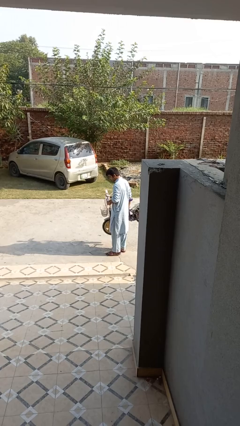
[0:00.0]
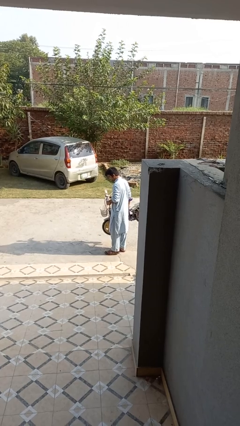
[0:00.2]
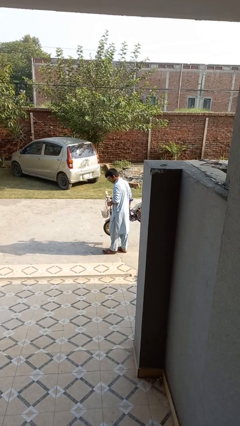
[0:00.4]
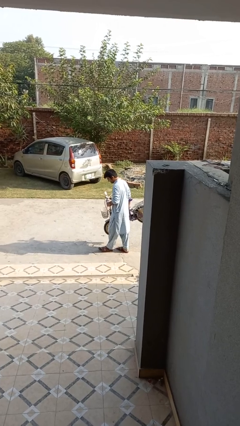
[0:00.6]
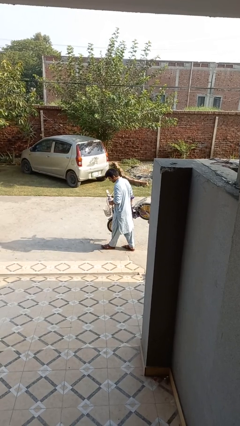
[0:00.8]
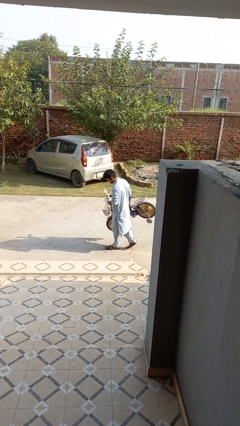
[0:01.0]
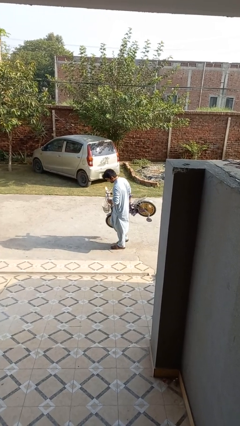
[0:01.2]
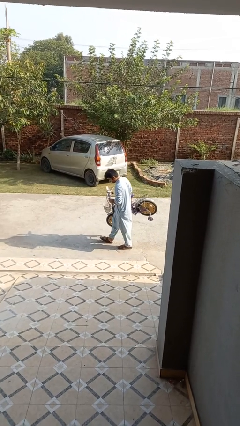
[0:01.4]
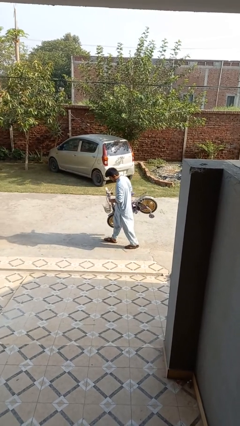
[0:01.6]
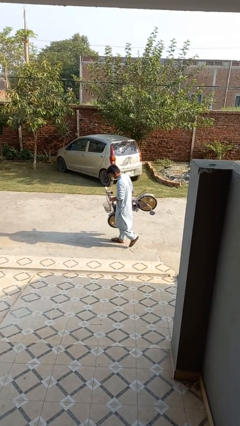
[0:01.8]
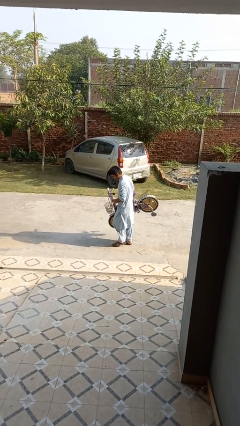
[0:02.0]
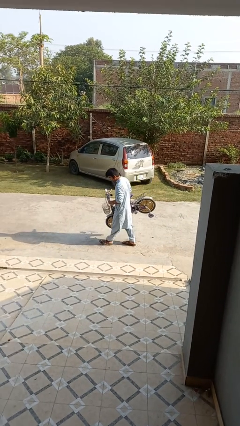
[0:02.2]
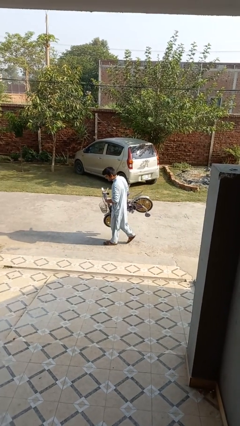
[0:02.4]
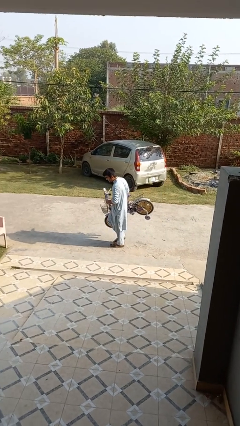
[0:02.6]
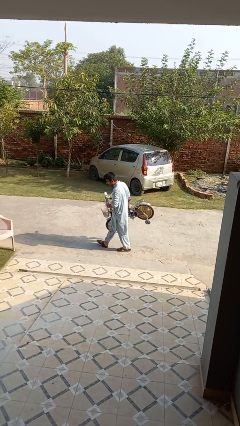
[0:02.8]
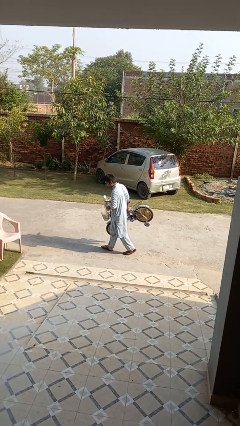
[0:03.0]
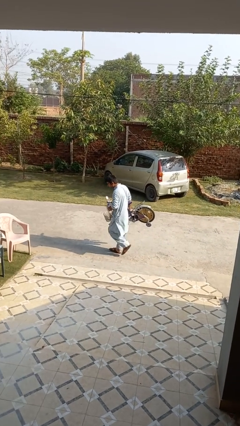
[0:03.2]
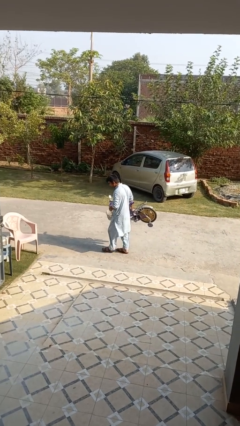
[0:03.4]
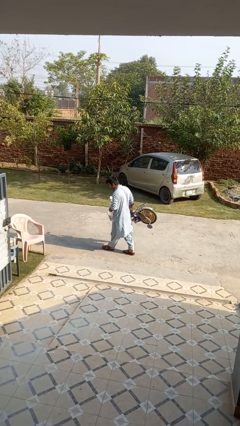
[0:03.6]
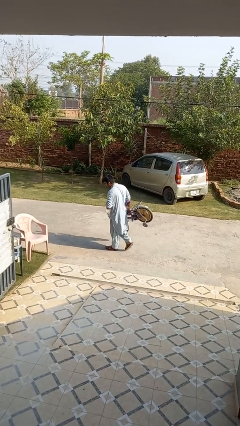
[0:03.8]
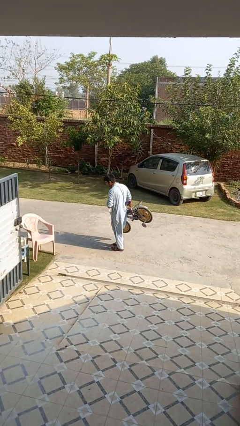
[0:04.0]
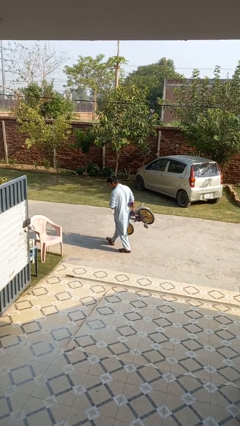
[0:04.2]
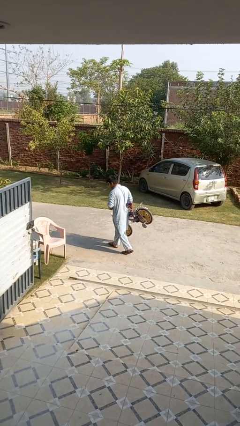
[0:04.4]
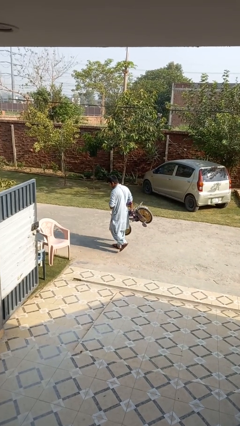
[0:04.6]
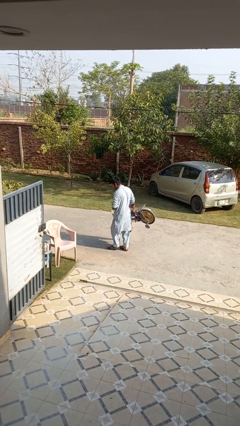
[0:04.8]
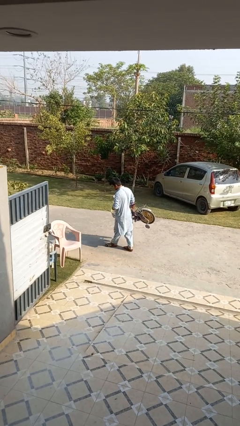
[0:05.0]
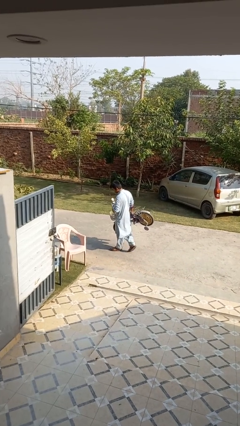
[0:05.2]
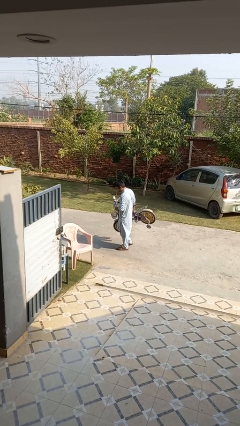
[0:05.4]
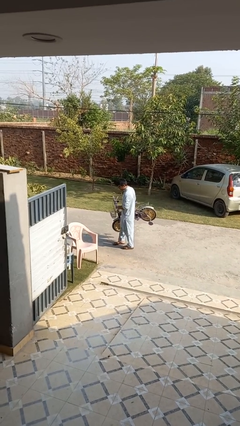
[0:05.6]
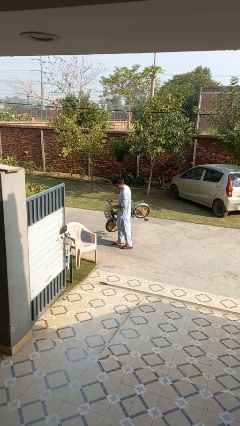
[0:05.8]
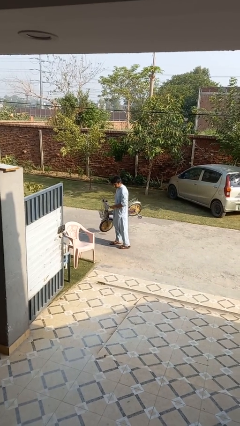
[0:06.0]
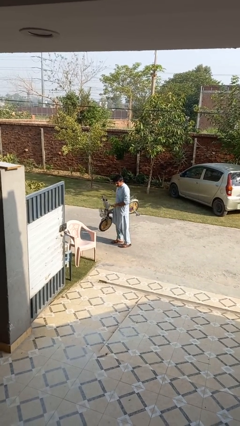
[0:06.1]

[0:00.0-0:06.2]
person carries bicycle

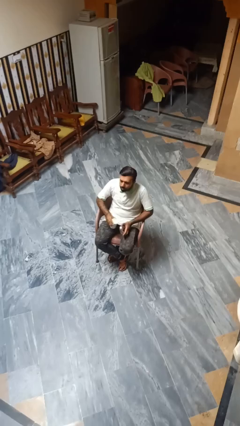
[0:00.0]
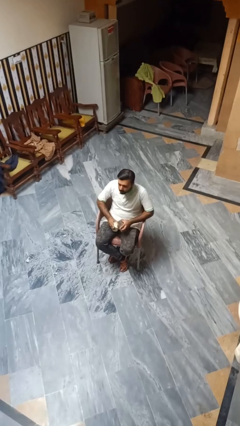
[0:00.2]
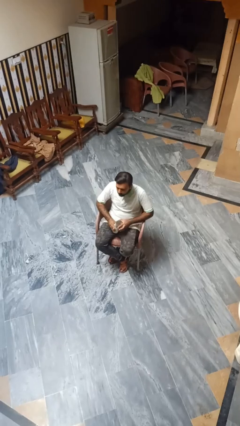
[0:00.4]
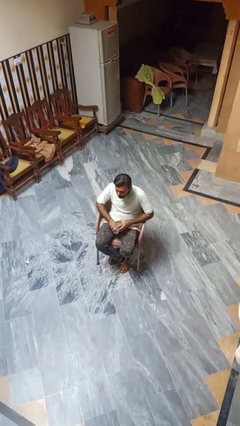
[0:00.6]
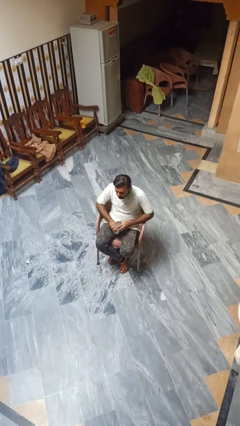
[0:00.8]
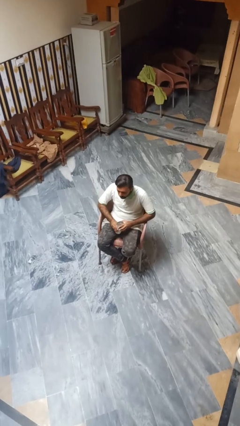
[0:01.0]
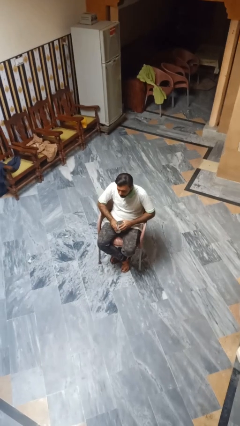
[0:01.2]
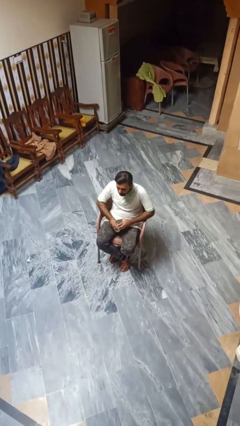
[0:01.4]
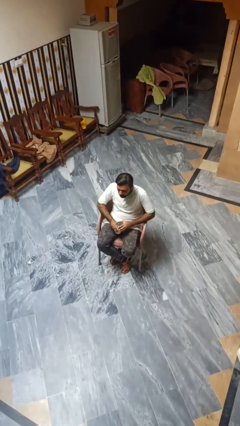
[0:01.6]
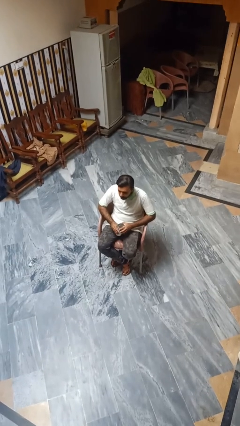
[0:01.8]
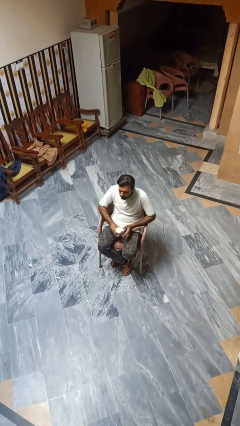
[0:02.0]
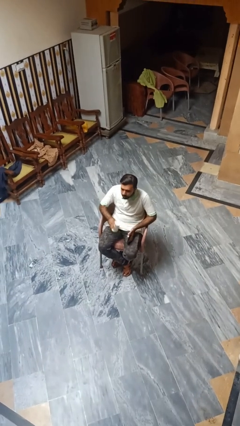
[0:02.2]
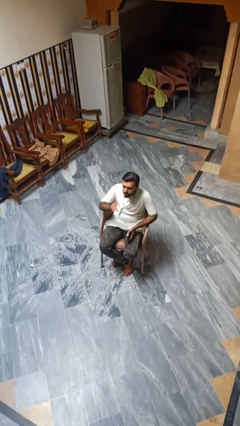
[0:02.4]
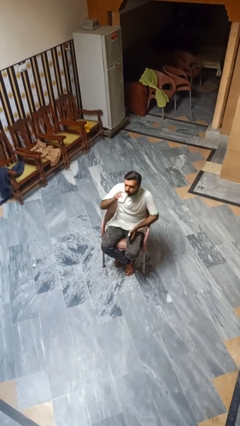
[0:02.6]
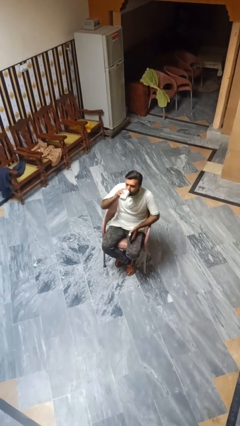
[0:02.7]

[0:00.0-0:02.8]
person opens beverage can

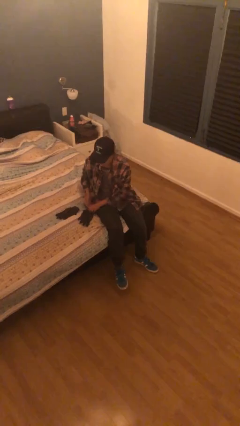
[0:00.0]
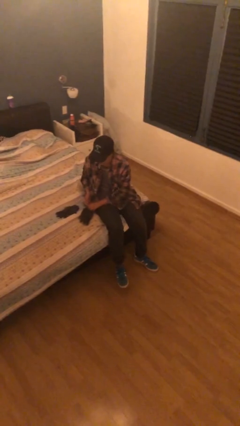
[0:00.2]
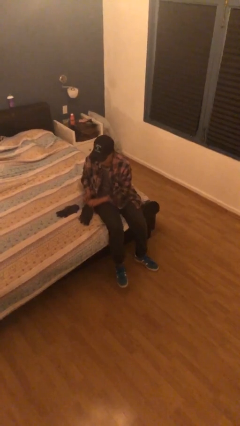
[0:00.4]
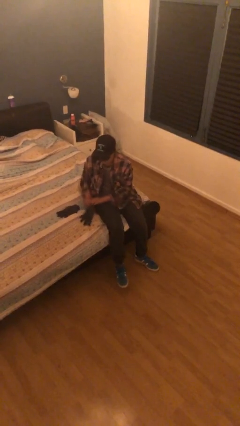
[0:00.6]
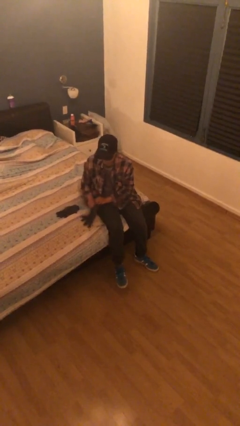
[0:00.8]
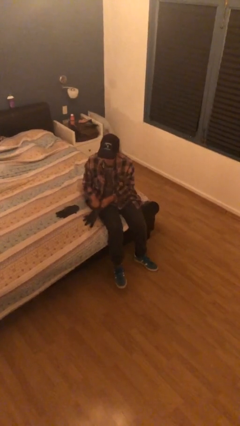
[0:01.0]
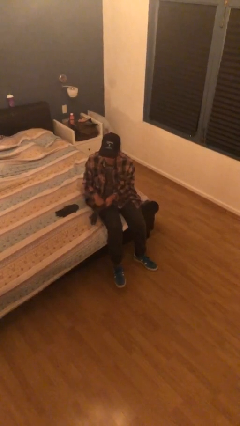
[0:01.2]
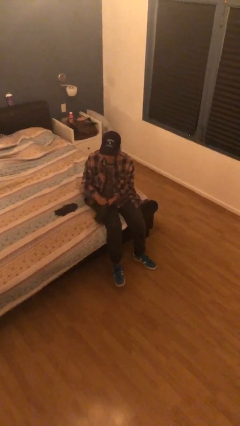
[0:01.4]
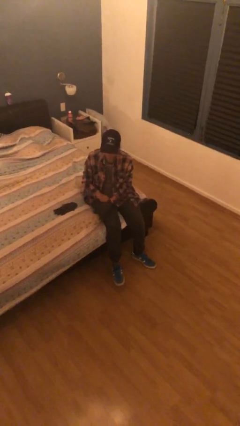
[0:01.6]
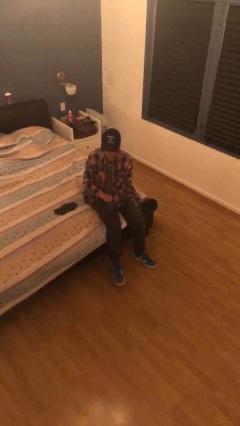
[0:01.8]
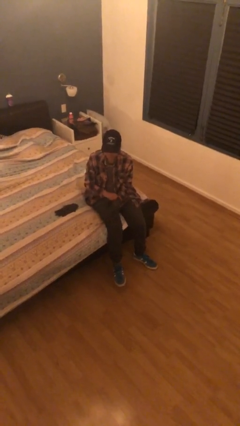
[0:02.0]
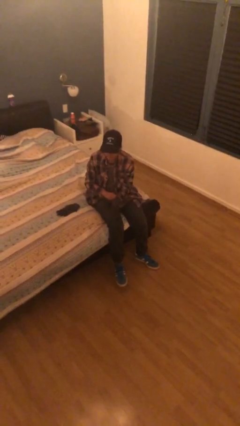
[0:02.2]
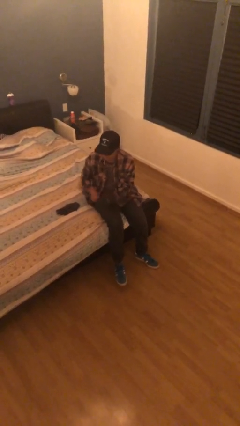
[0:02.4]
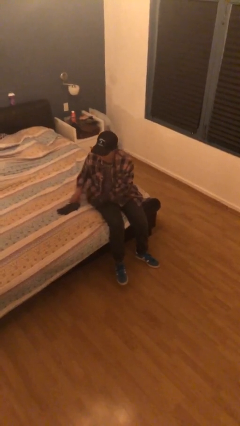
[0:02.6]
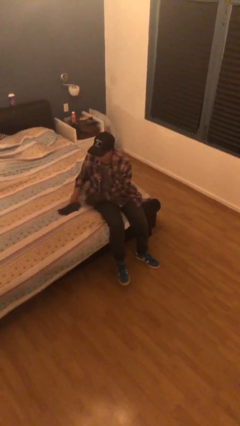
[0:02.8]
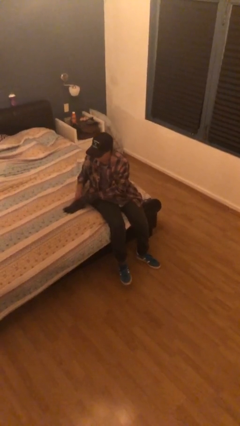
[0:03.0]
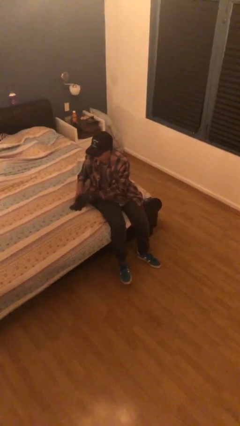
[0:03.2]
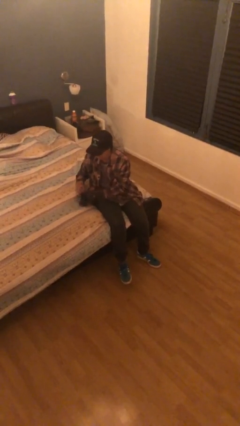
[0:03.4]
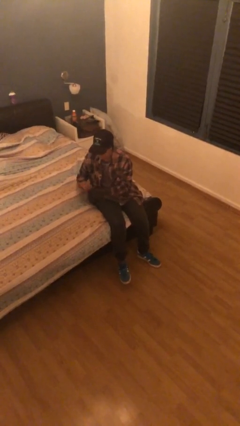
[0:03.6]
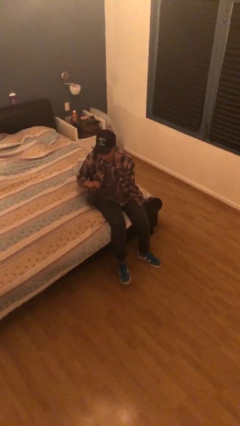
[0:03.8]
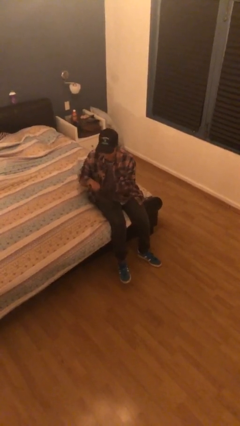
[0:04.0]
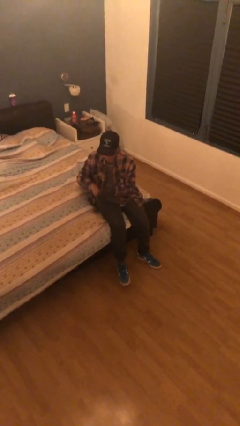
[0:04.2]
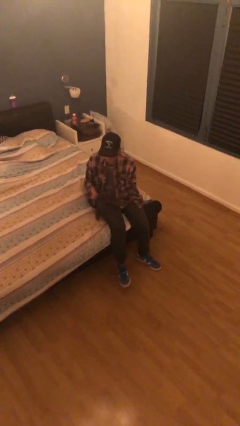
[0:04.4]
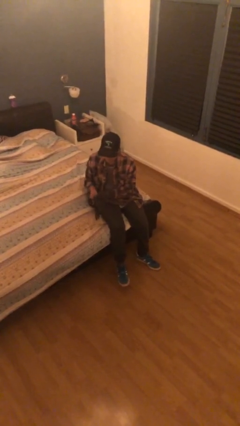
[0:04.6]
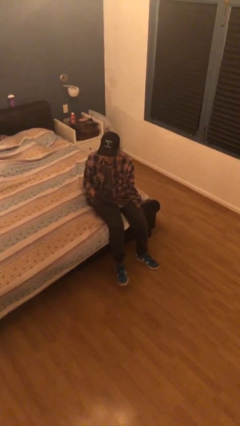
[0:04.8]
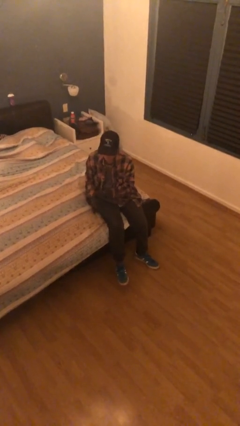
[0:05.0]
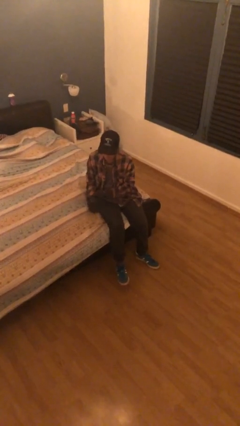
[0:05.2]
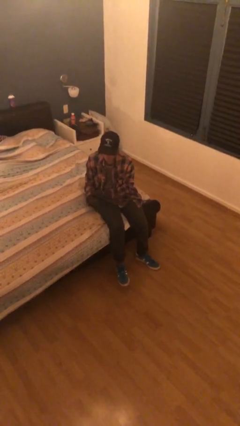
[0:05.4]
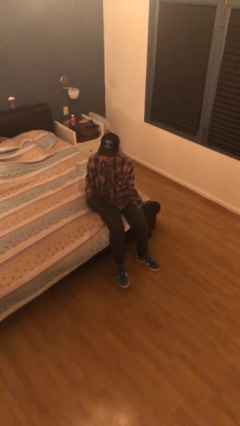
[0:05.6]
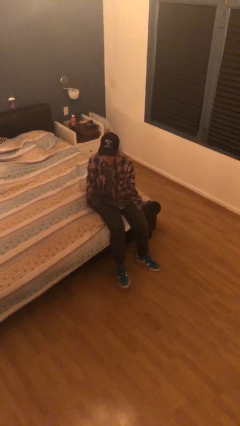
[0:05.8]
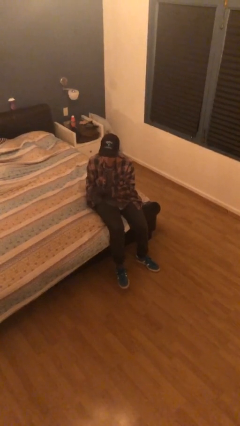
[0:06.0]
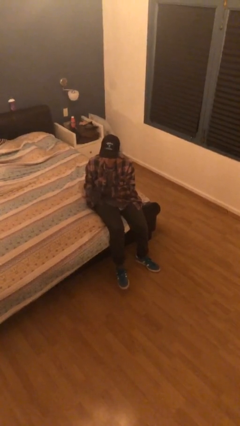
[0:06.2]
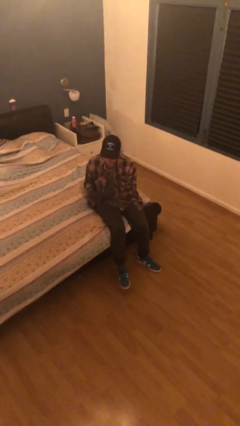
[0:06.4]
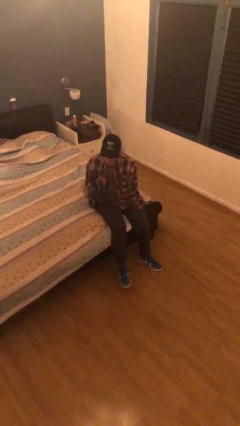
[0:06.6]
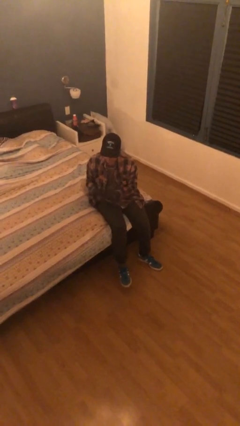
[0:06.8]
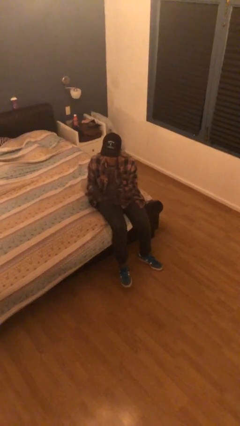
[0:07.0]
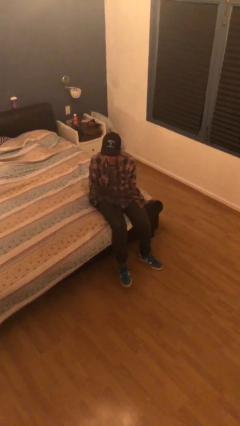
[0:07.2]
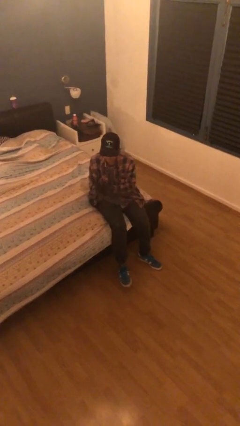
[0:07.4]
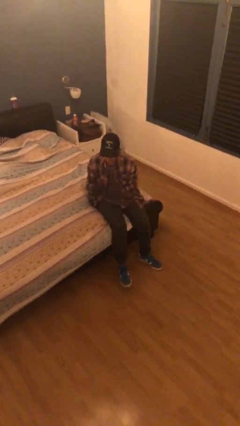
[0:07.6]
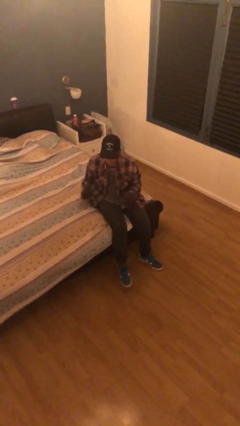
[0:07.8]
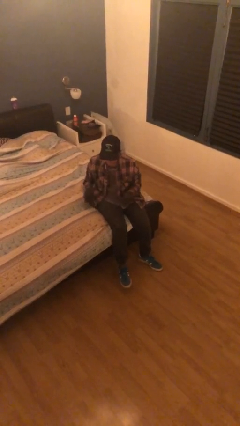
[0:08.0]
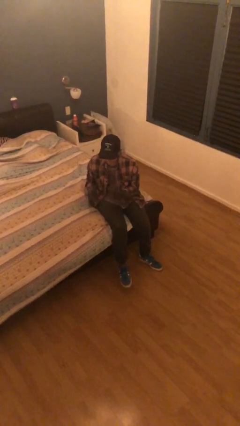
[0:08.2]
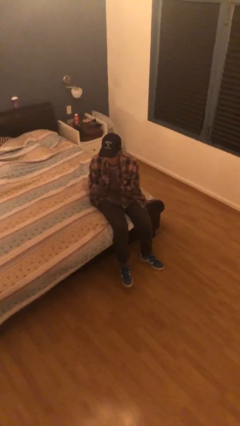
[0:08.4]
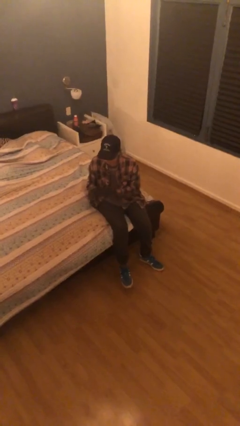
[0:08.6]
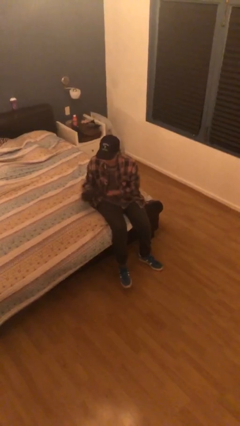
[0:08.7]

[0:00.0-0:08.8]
person puts on gloves
